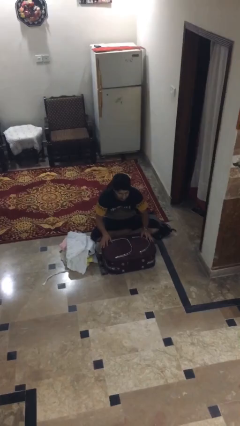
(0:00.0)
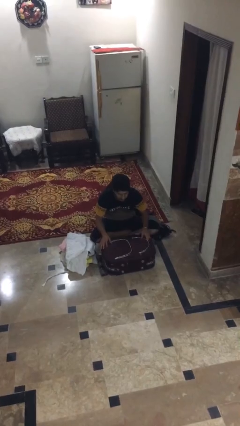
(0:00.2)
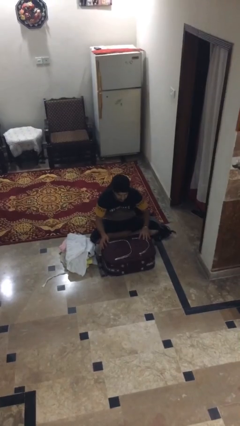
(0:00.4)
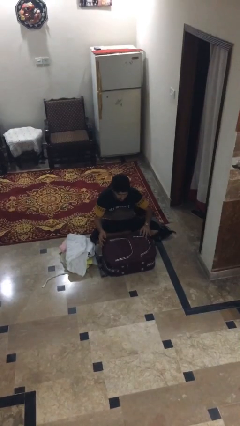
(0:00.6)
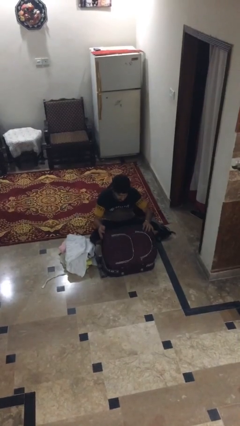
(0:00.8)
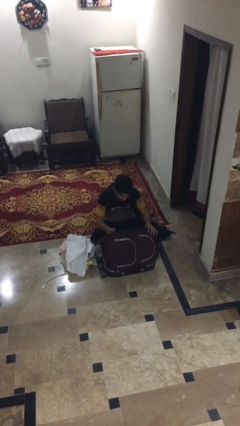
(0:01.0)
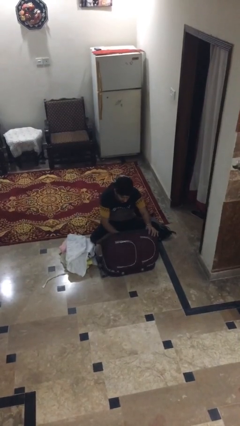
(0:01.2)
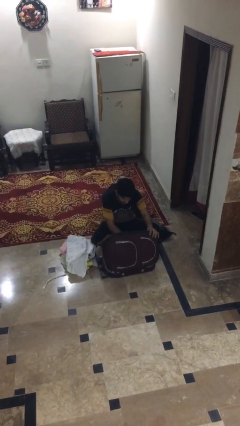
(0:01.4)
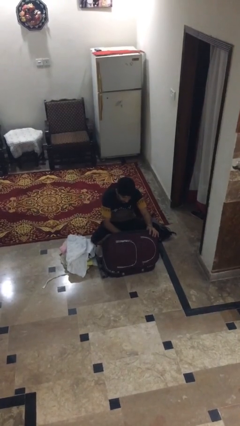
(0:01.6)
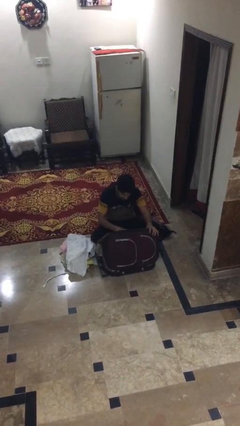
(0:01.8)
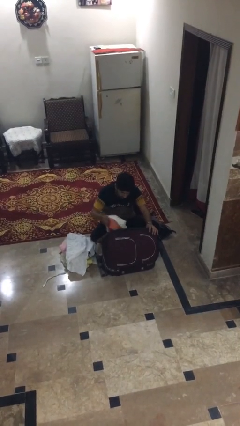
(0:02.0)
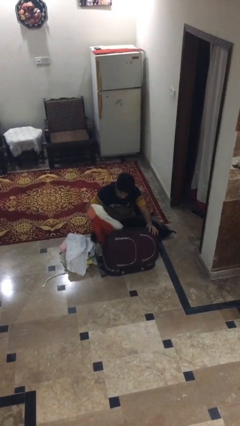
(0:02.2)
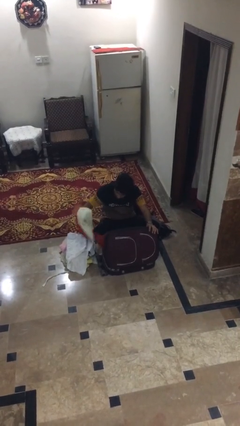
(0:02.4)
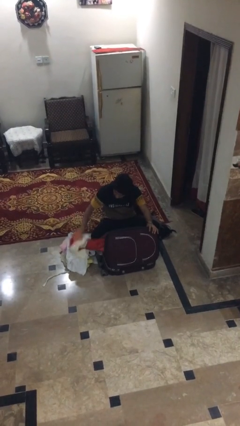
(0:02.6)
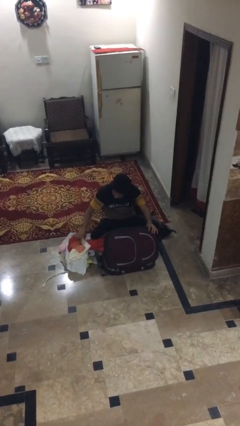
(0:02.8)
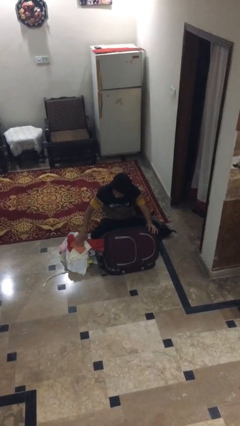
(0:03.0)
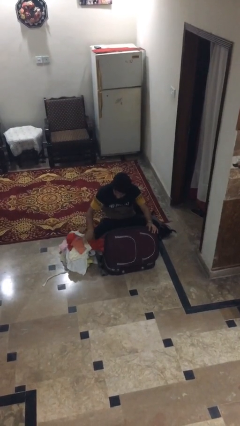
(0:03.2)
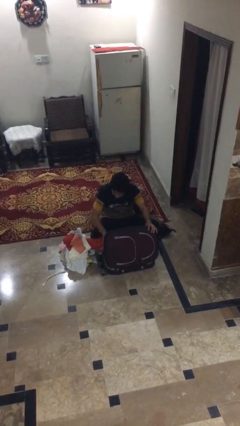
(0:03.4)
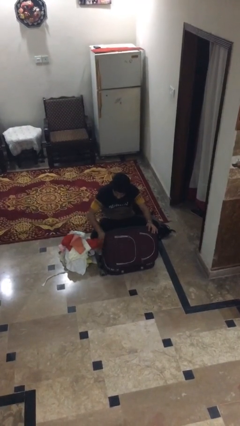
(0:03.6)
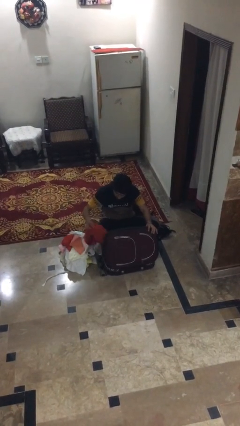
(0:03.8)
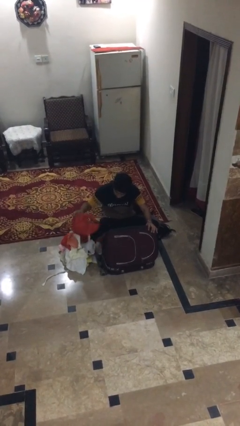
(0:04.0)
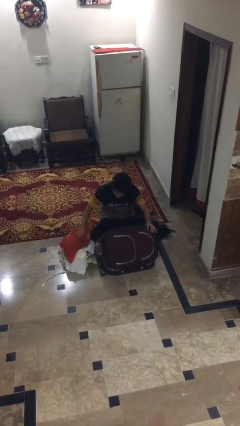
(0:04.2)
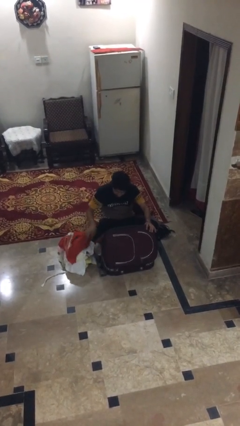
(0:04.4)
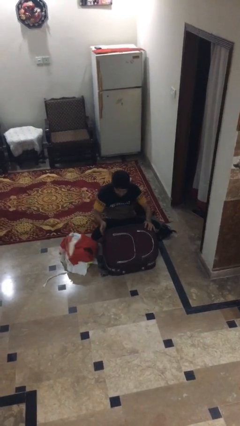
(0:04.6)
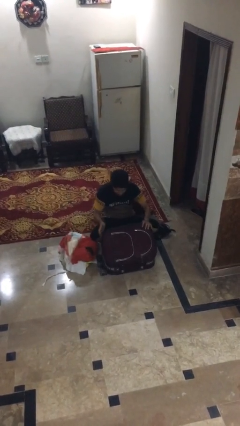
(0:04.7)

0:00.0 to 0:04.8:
person unloads clothes from suitcase

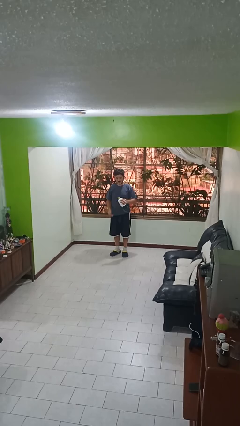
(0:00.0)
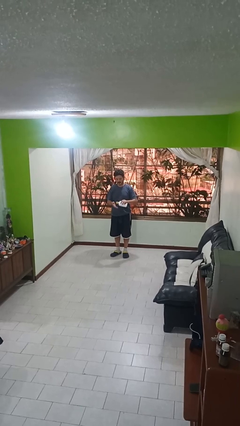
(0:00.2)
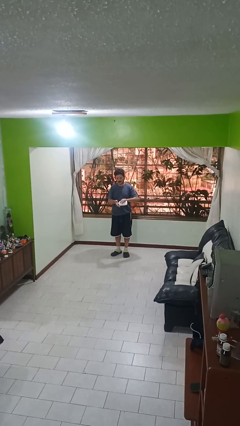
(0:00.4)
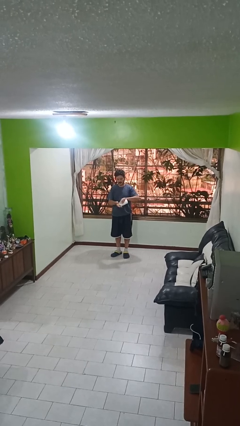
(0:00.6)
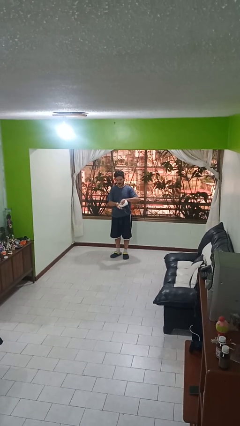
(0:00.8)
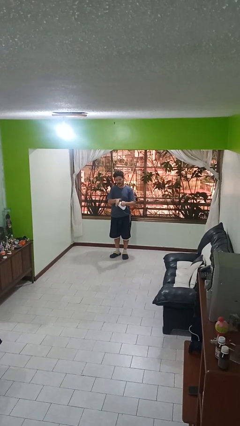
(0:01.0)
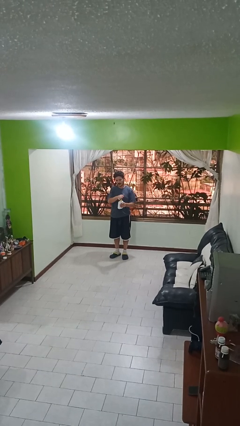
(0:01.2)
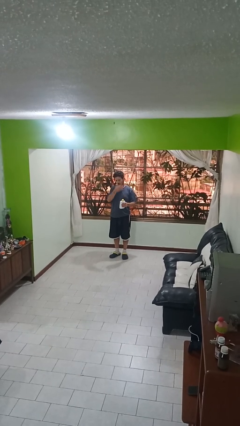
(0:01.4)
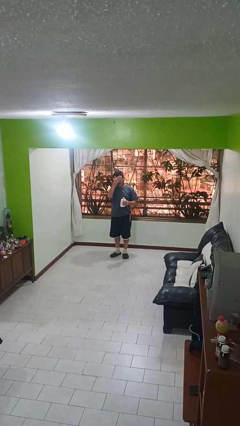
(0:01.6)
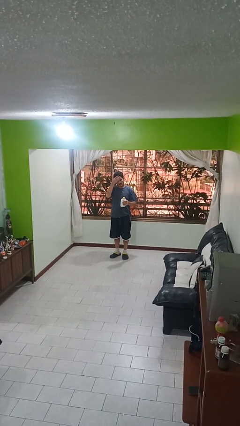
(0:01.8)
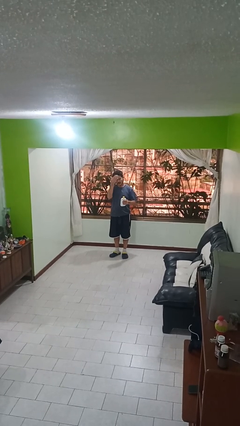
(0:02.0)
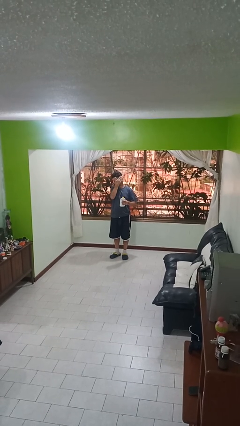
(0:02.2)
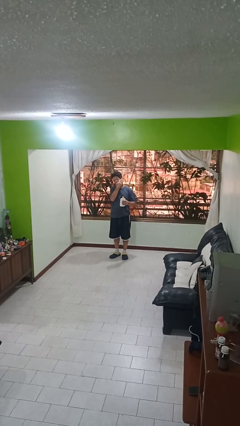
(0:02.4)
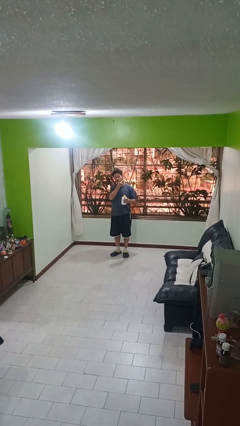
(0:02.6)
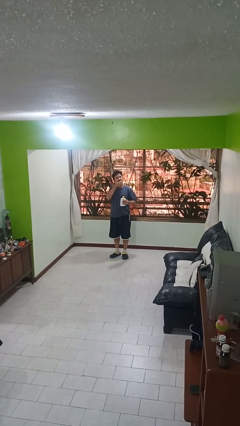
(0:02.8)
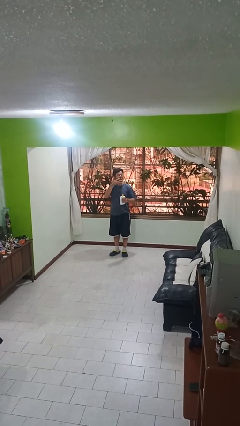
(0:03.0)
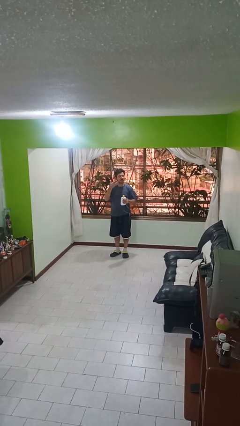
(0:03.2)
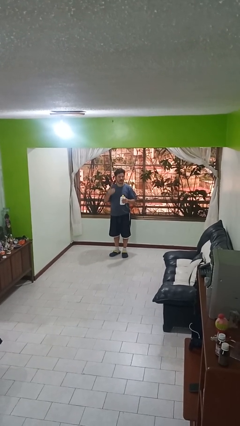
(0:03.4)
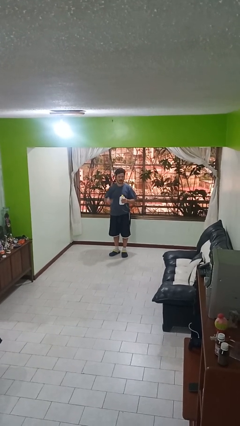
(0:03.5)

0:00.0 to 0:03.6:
person applies facial moisturizer

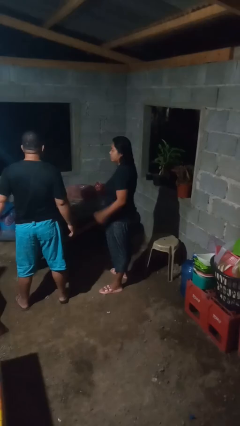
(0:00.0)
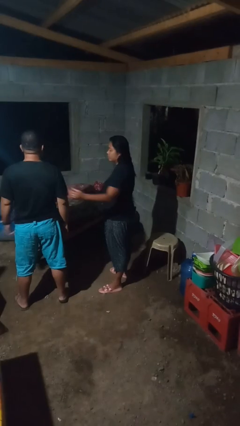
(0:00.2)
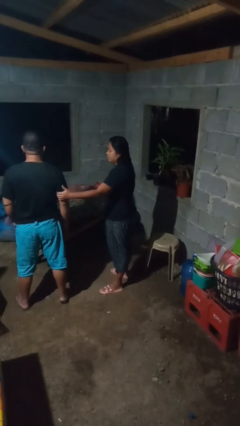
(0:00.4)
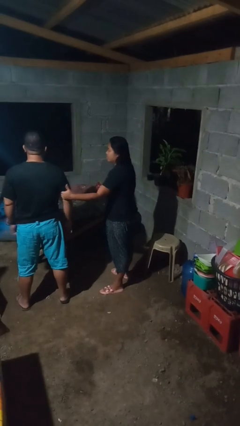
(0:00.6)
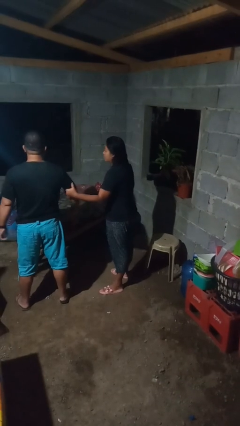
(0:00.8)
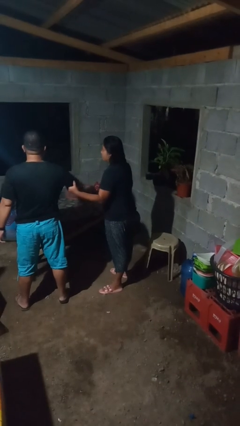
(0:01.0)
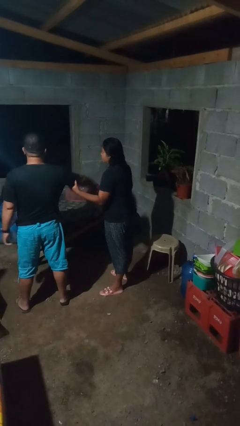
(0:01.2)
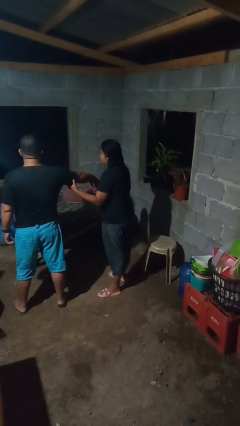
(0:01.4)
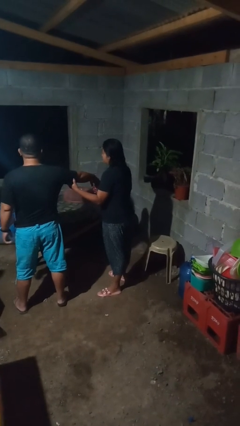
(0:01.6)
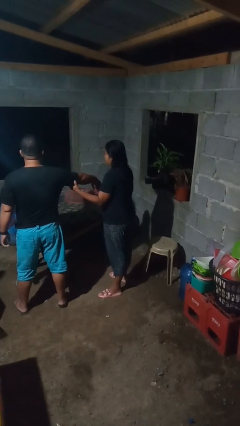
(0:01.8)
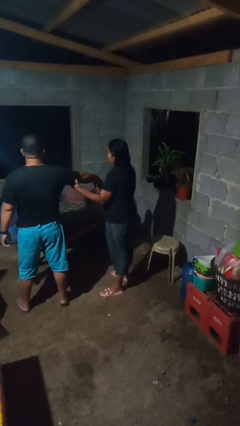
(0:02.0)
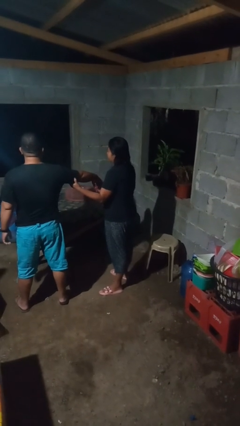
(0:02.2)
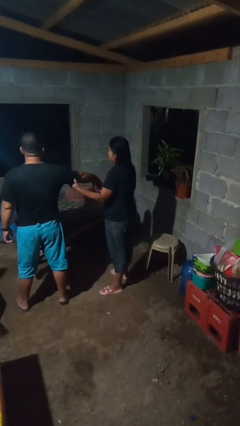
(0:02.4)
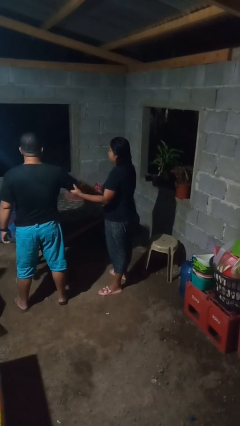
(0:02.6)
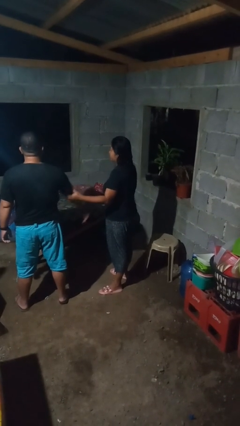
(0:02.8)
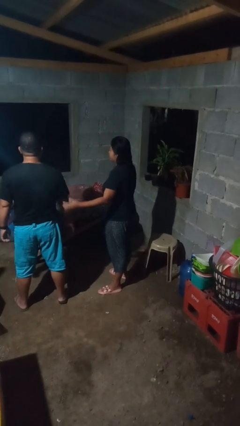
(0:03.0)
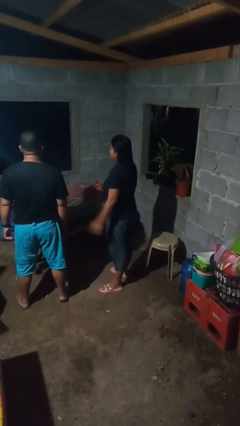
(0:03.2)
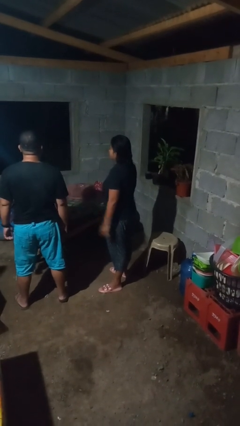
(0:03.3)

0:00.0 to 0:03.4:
person grabs person by bicep

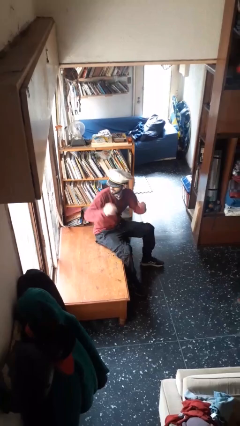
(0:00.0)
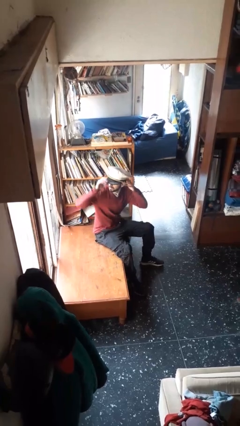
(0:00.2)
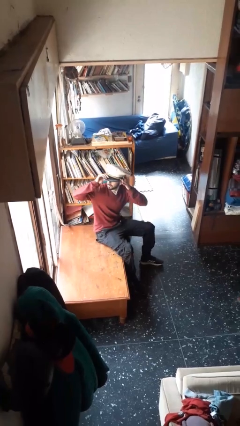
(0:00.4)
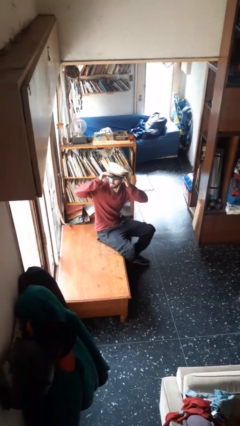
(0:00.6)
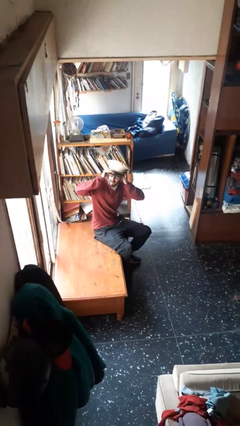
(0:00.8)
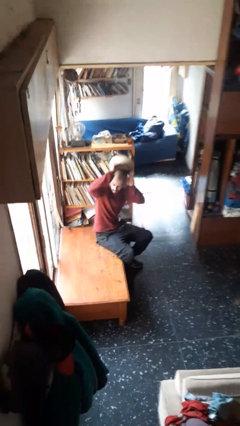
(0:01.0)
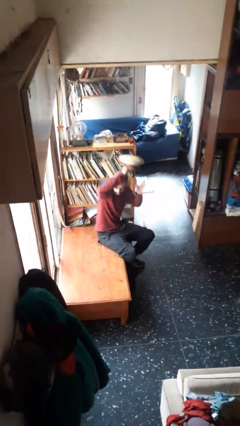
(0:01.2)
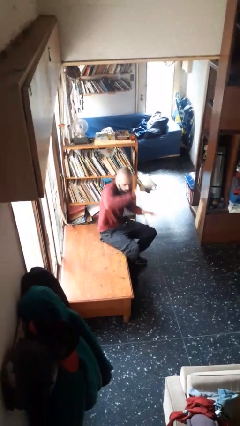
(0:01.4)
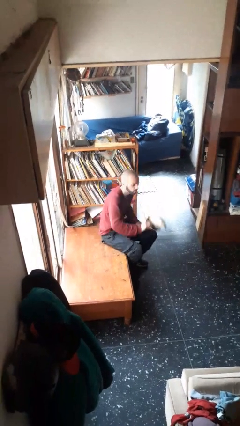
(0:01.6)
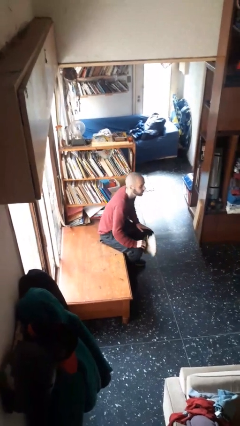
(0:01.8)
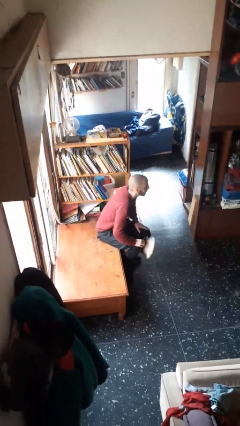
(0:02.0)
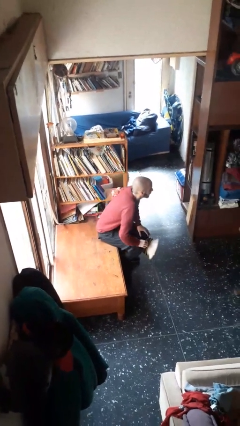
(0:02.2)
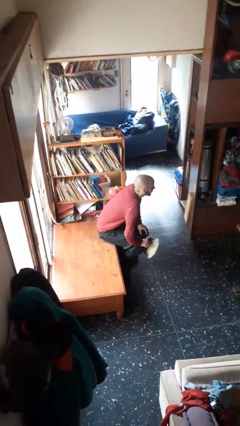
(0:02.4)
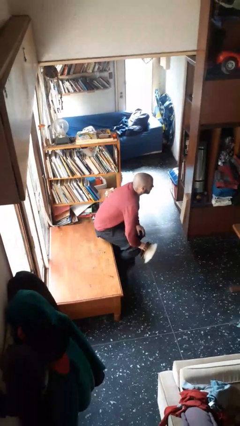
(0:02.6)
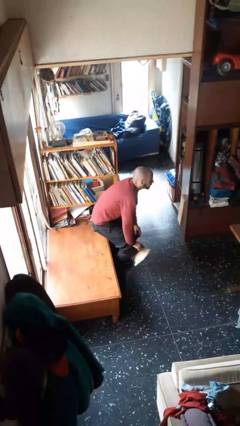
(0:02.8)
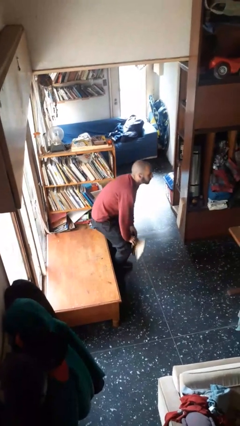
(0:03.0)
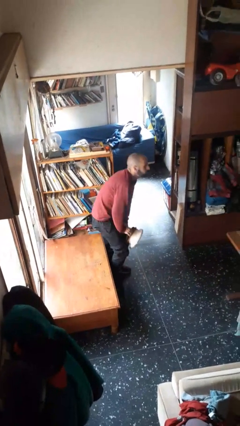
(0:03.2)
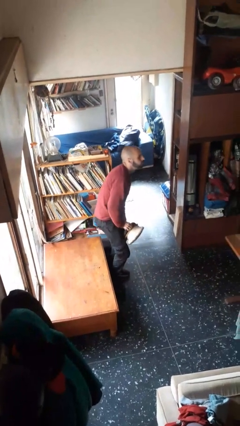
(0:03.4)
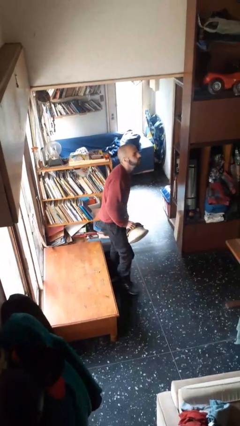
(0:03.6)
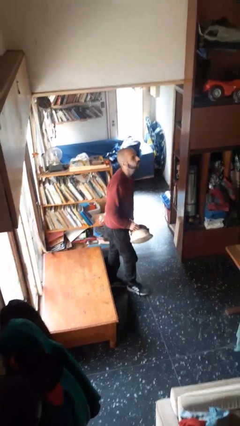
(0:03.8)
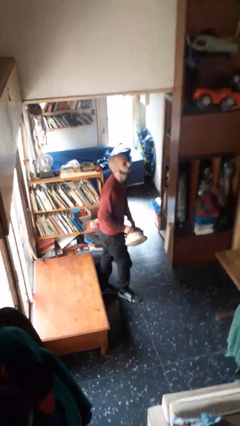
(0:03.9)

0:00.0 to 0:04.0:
person takes off hat

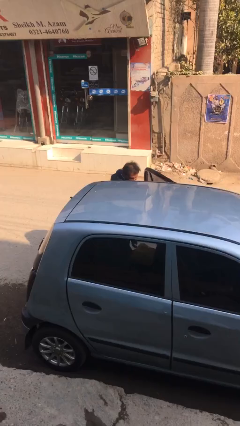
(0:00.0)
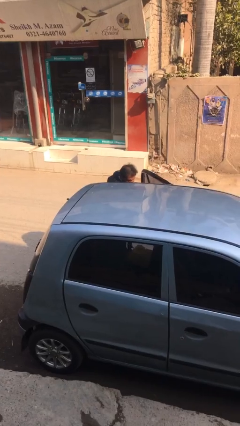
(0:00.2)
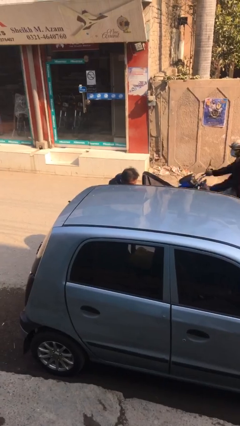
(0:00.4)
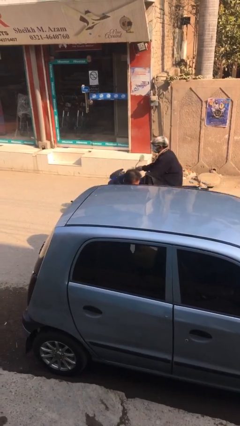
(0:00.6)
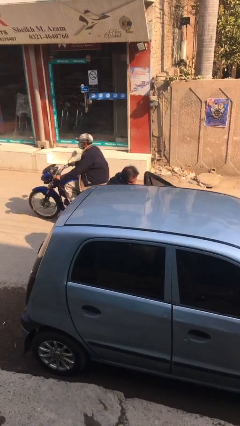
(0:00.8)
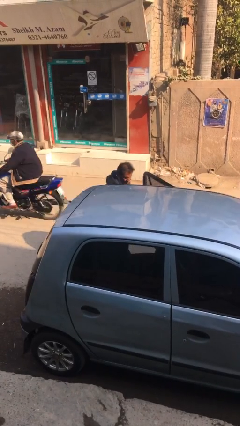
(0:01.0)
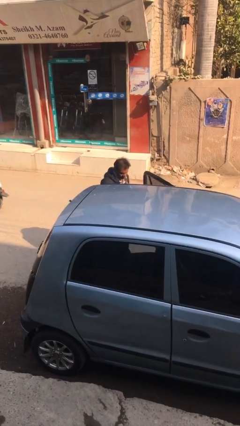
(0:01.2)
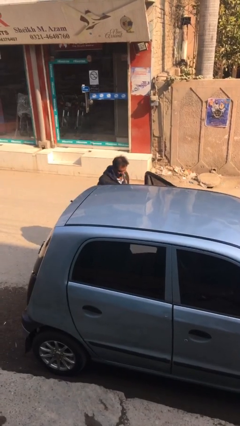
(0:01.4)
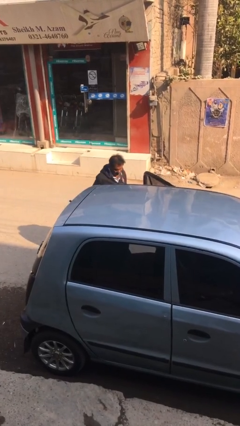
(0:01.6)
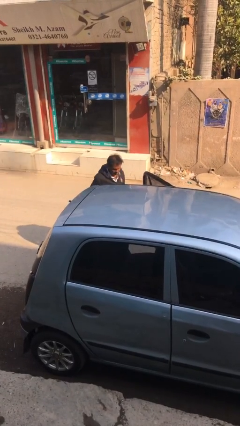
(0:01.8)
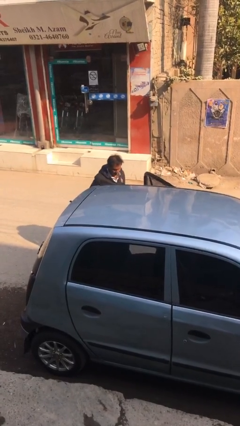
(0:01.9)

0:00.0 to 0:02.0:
person unloads car

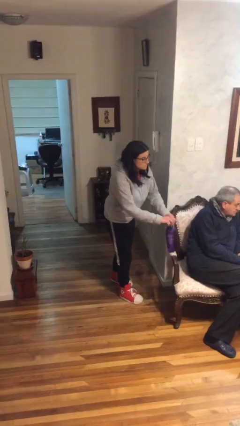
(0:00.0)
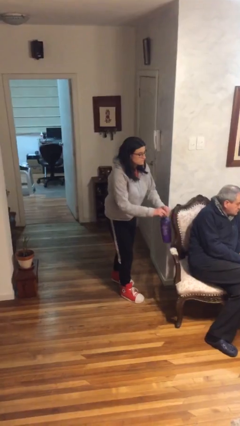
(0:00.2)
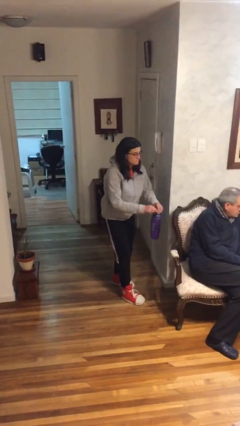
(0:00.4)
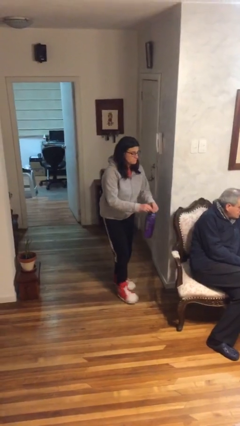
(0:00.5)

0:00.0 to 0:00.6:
person steals object from person
